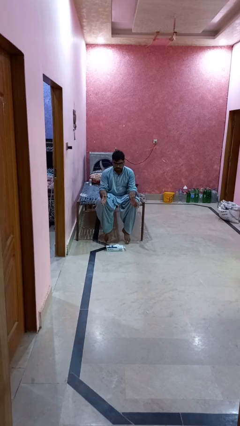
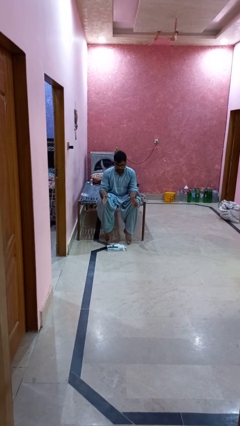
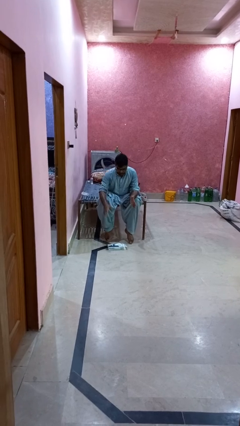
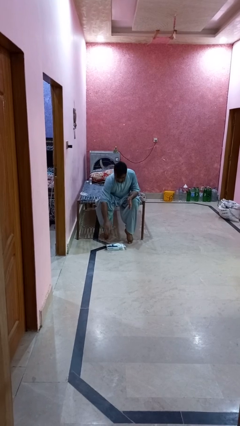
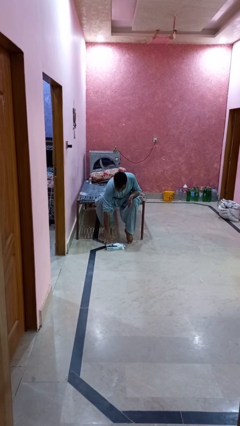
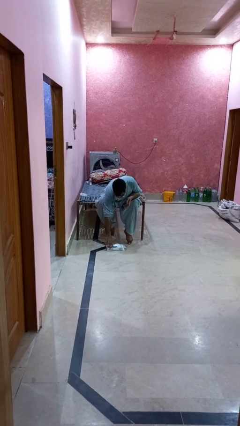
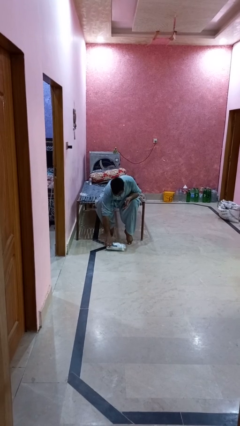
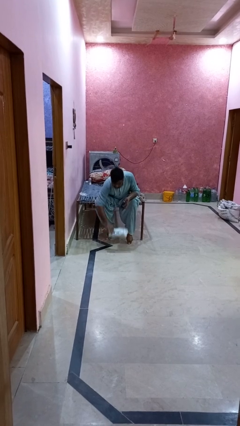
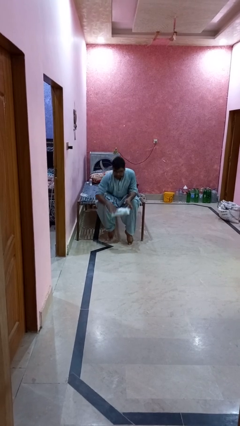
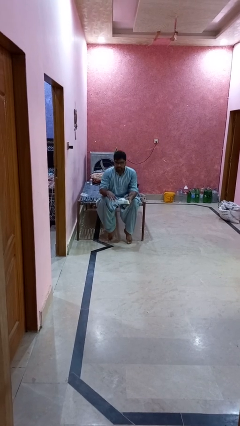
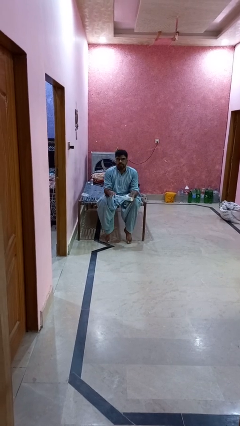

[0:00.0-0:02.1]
person picks up object from floor

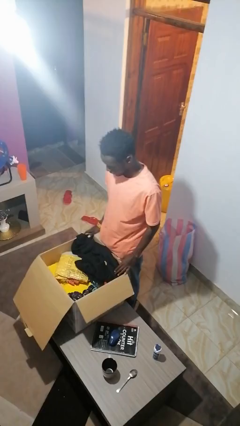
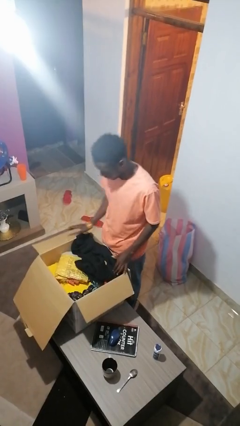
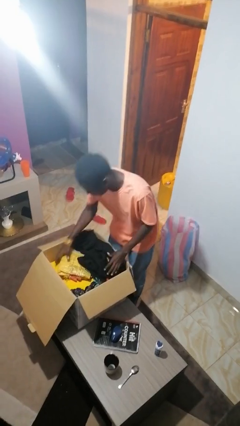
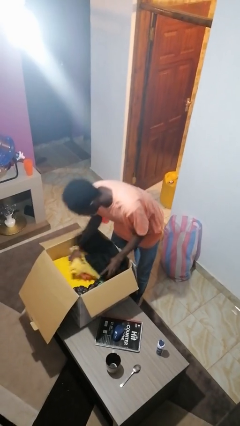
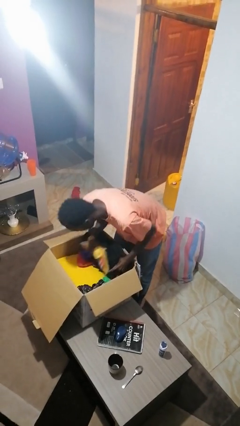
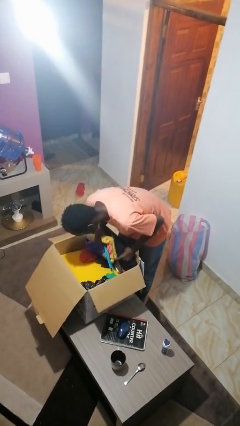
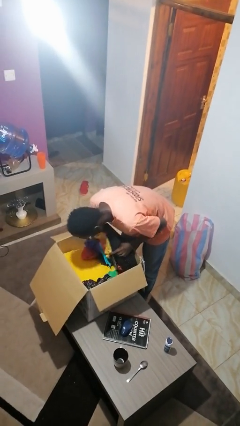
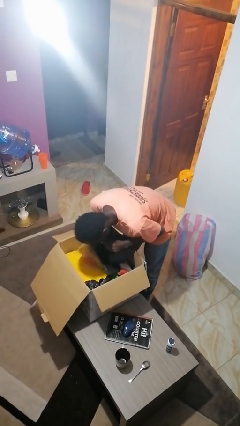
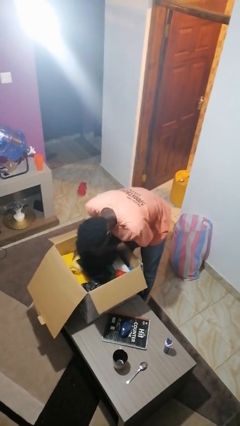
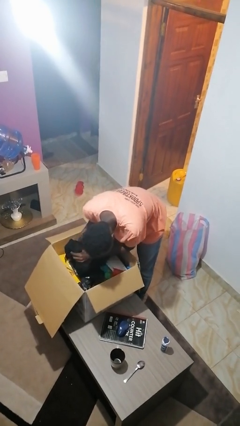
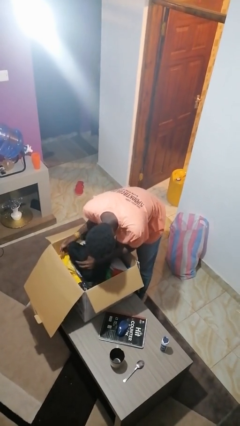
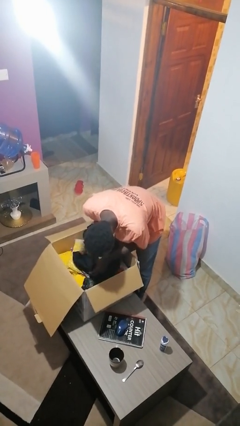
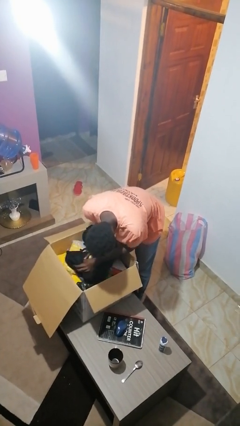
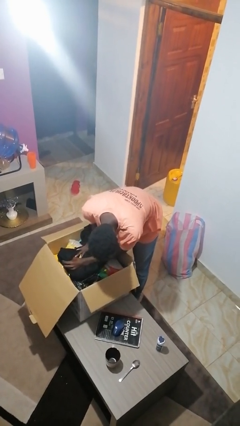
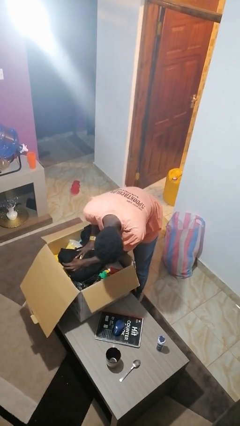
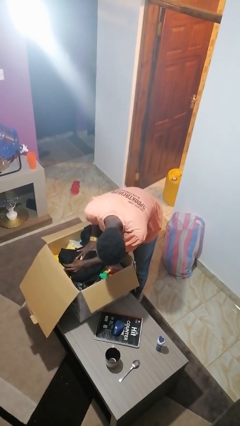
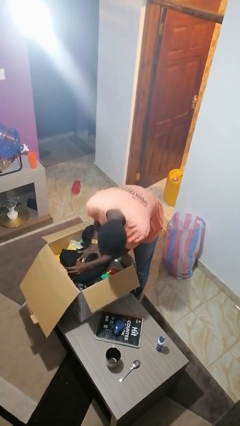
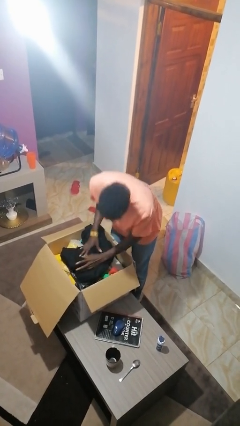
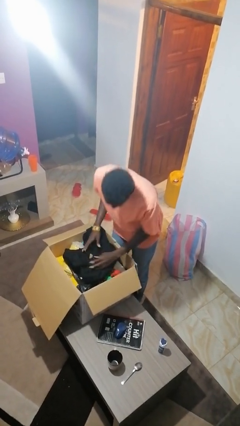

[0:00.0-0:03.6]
person searches in box

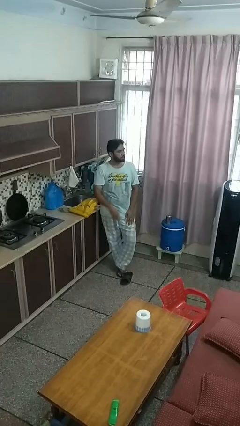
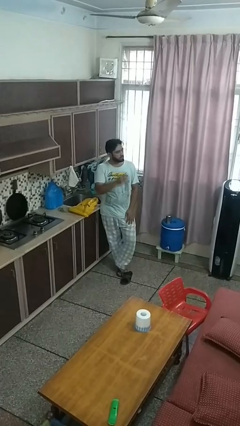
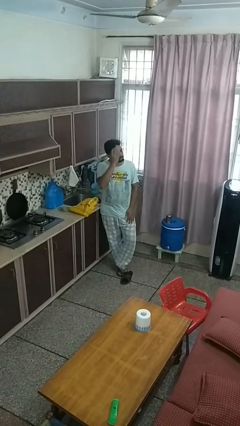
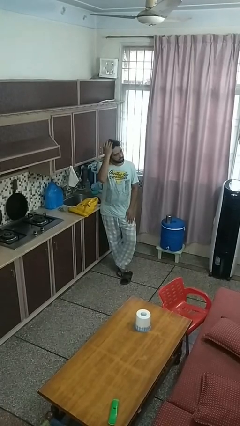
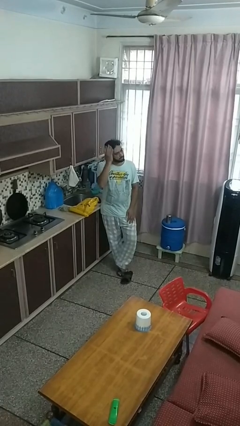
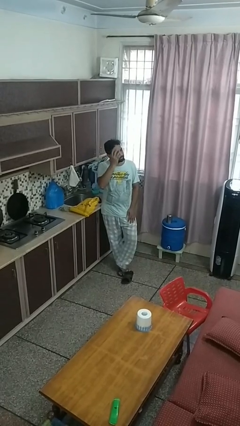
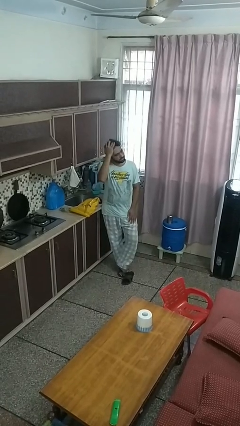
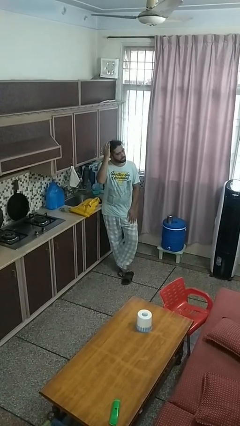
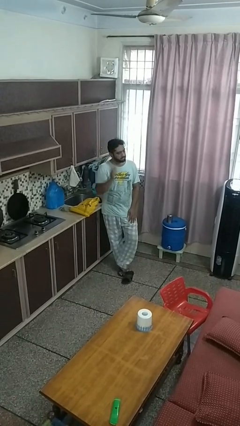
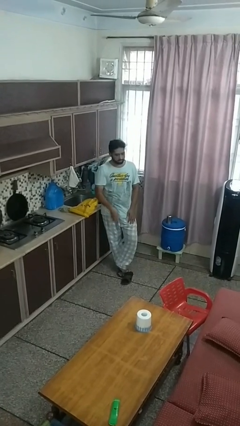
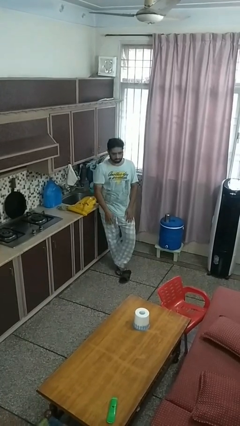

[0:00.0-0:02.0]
person strokes hair

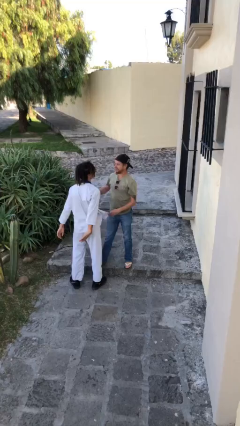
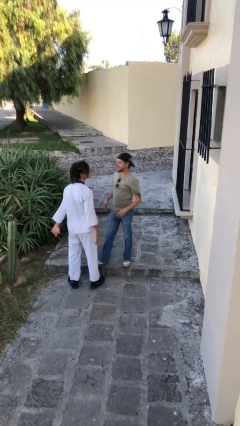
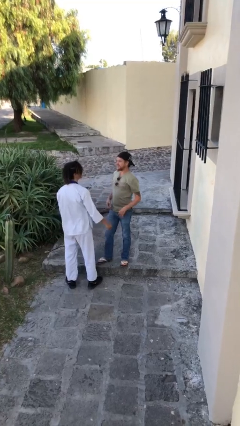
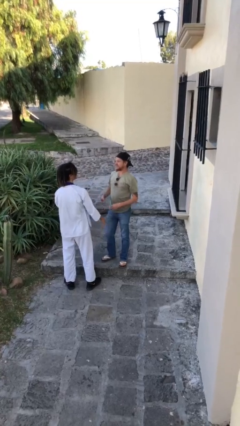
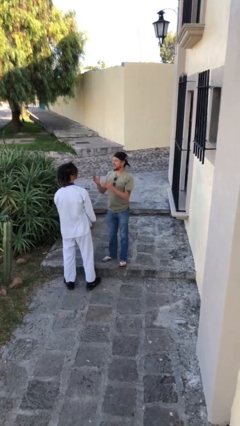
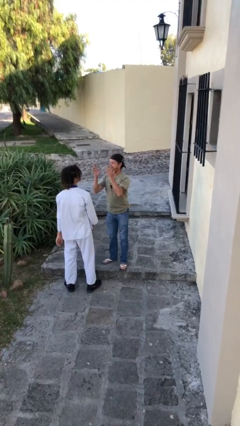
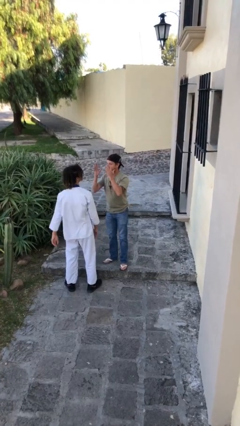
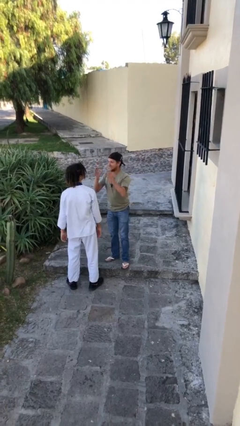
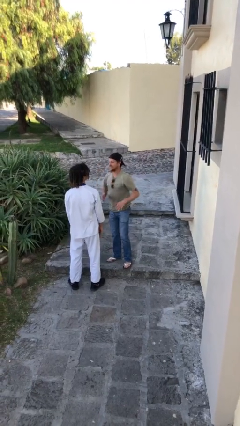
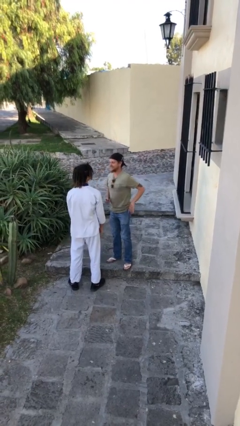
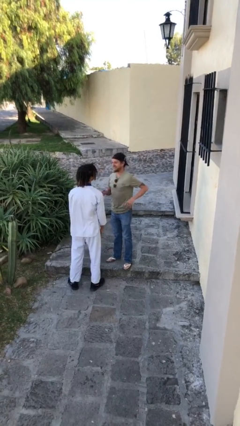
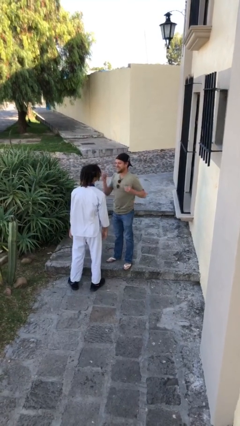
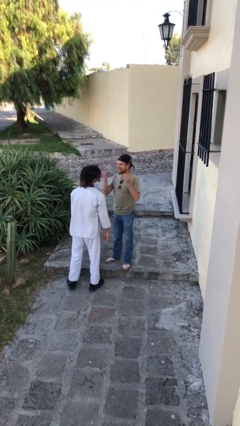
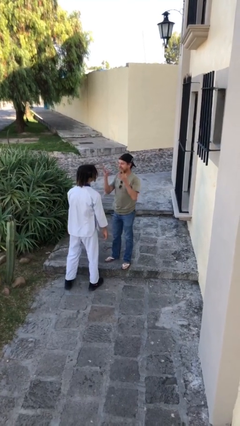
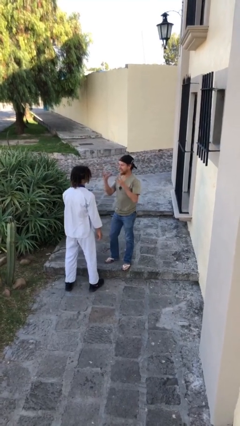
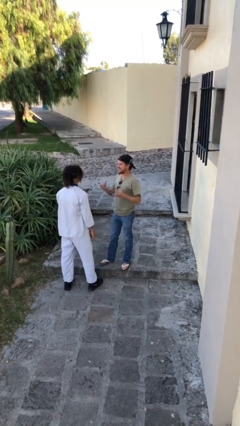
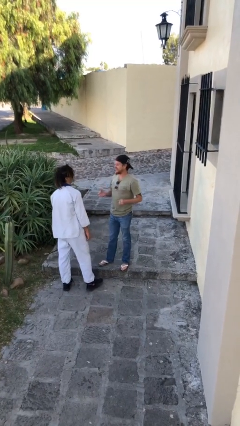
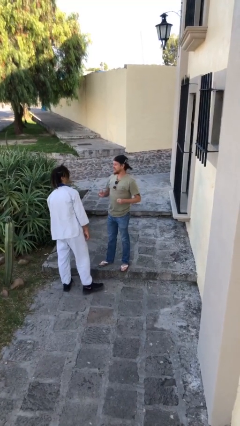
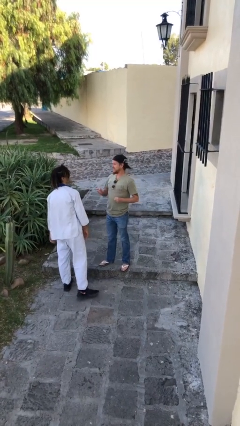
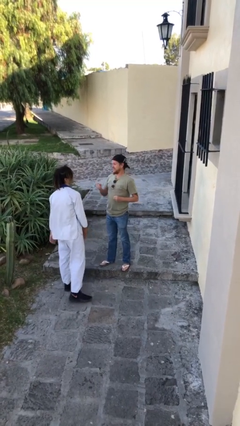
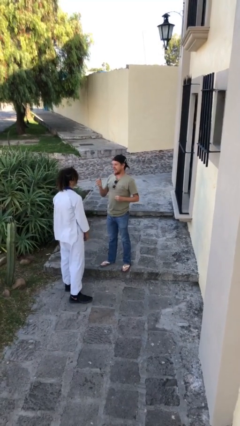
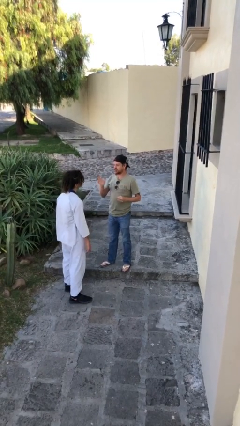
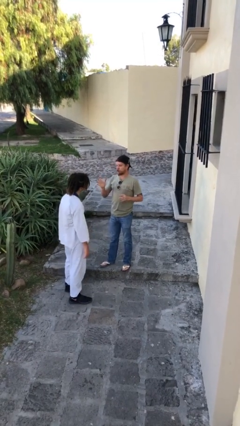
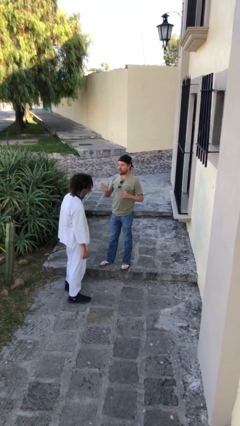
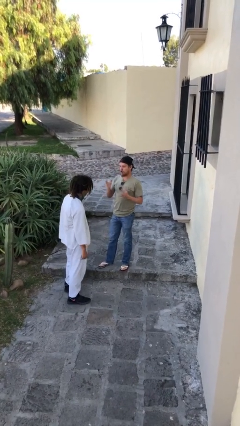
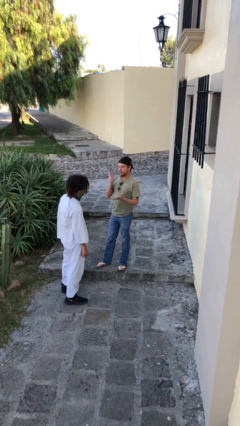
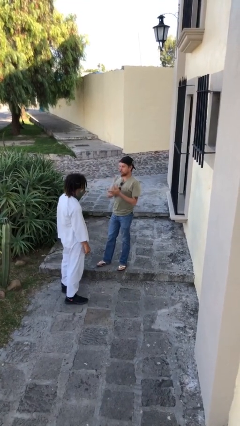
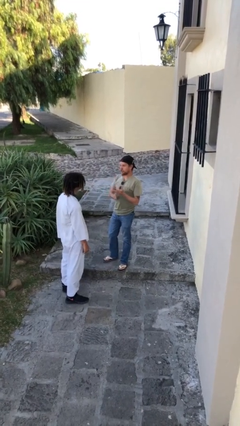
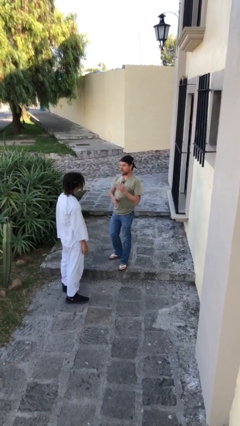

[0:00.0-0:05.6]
person talks to person

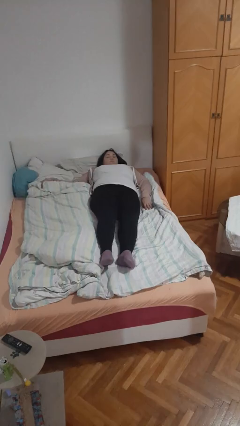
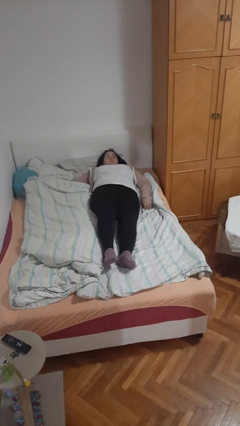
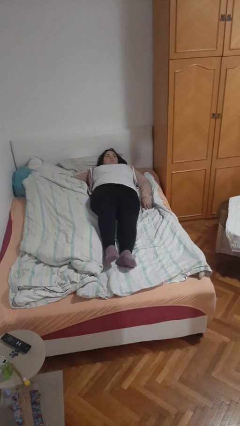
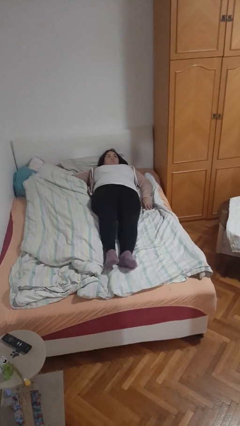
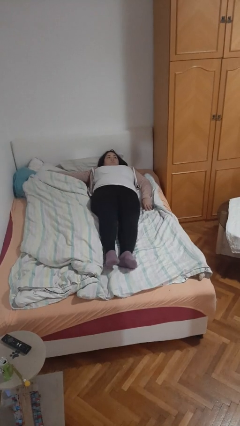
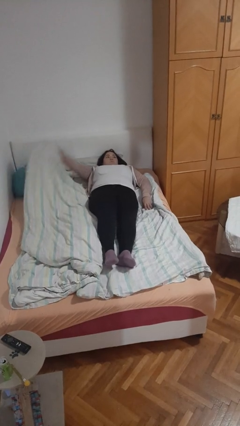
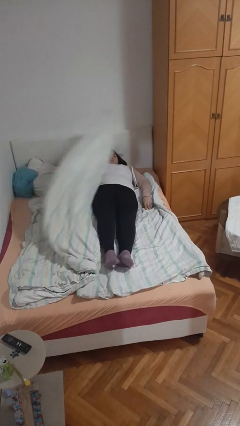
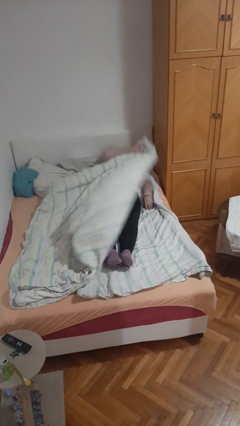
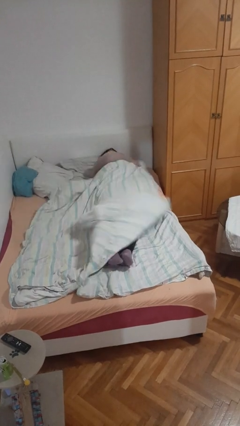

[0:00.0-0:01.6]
person covers with bedsheets

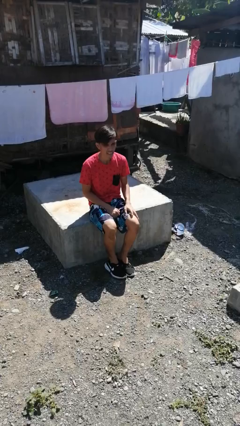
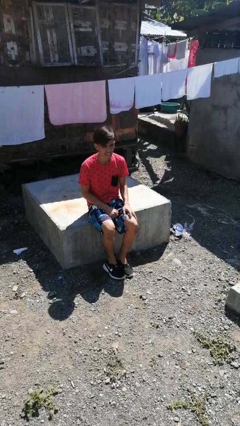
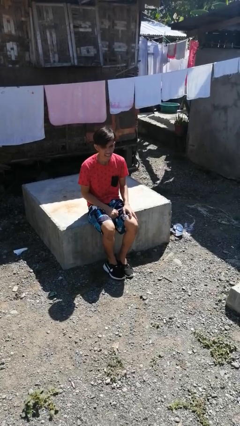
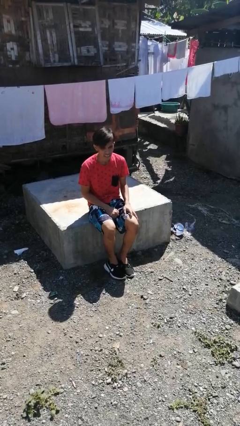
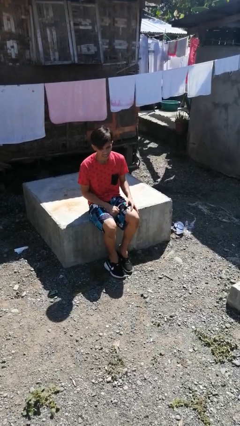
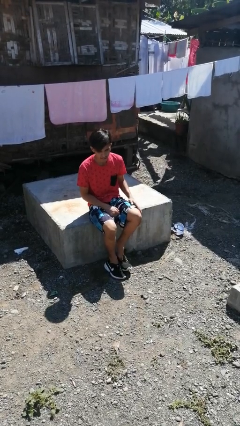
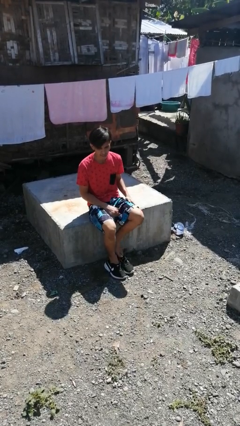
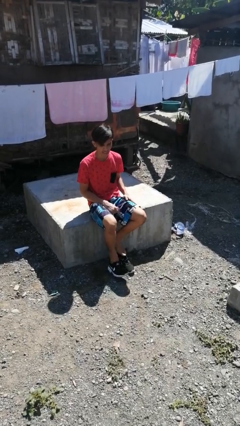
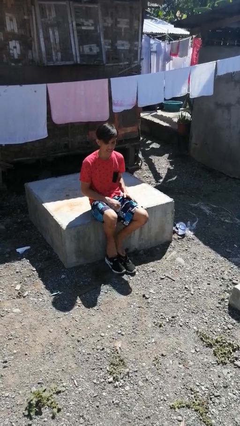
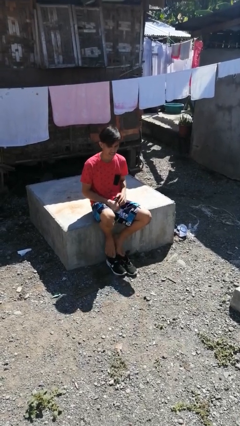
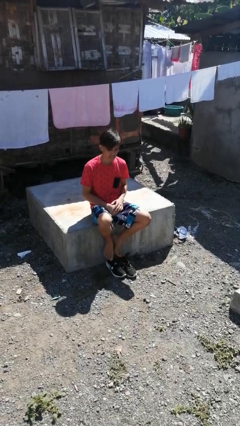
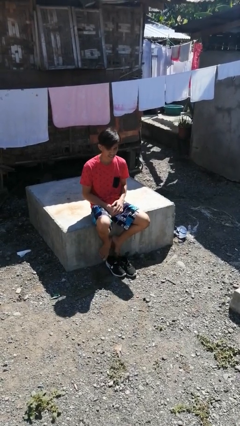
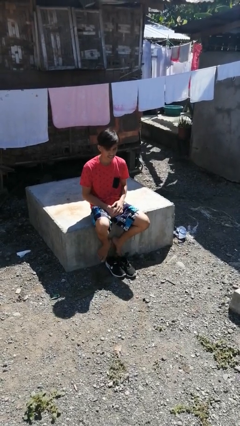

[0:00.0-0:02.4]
person takes off shoes

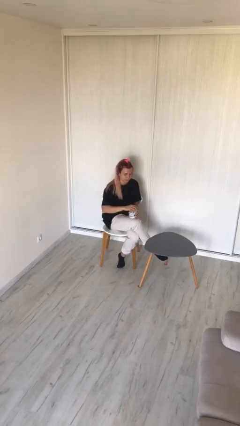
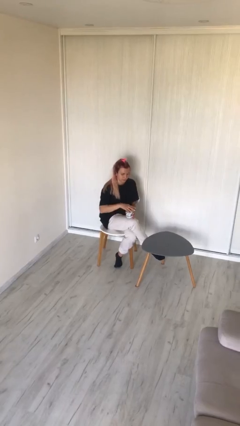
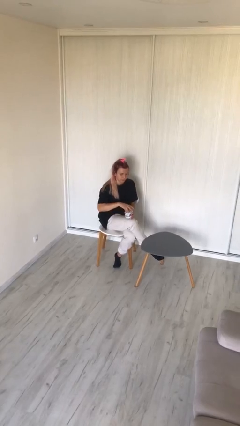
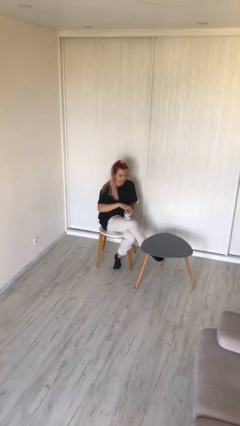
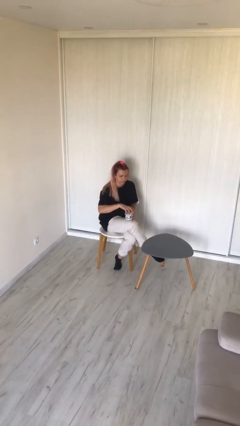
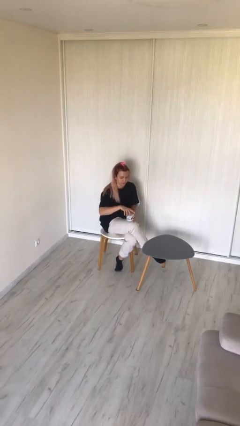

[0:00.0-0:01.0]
person closes jar
